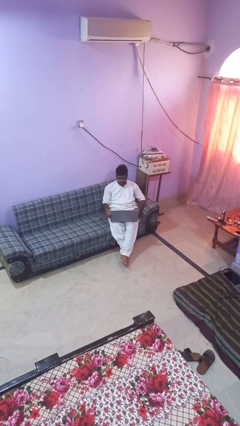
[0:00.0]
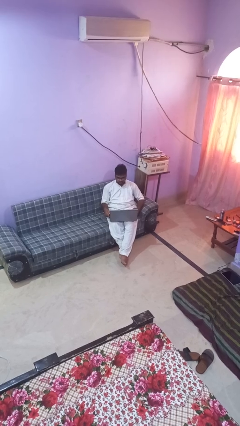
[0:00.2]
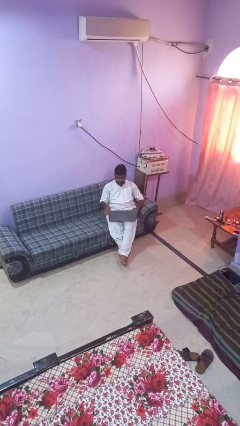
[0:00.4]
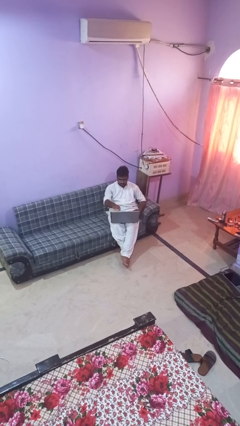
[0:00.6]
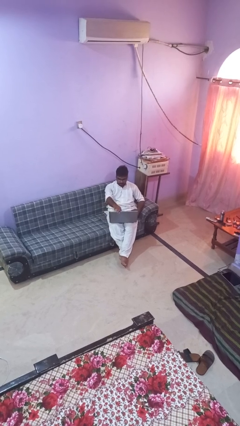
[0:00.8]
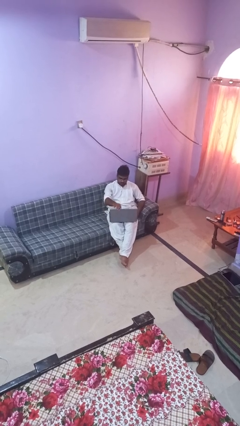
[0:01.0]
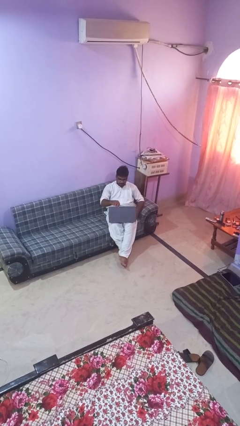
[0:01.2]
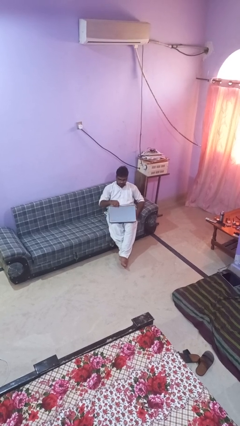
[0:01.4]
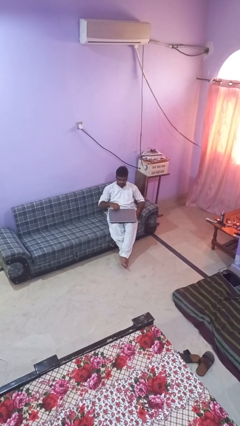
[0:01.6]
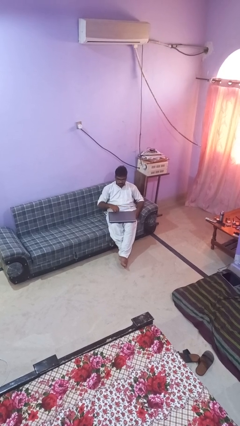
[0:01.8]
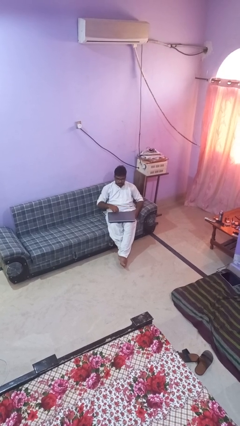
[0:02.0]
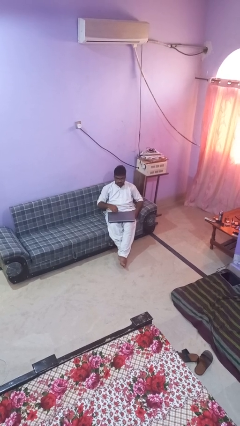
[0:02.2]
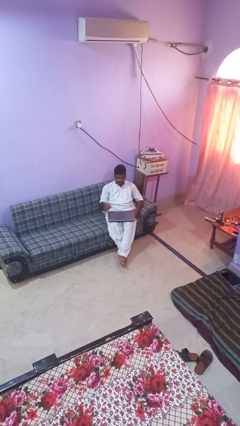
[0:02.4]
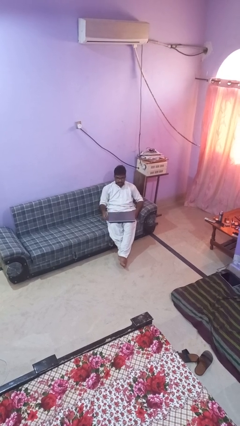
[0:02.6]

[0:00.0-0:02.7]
person closes laptop

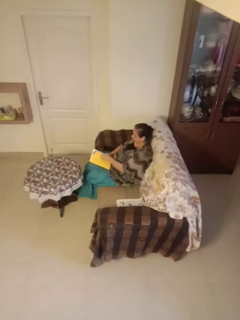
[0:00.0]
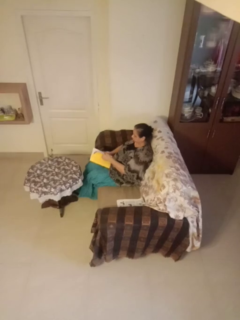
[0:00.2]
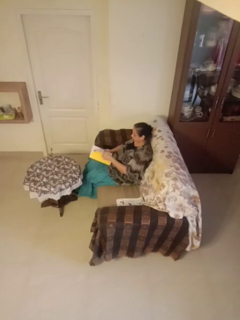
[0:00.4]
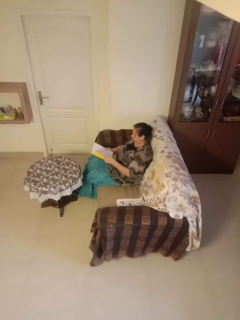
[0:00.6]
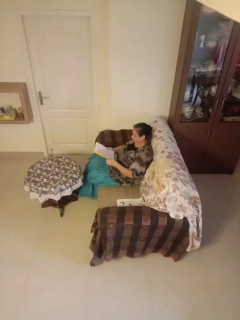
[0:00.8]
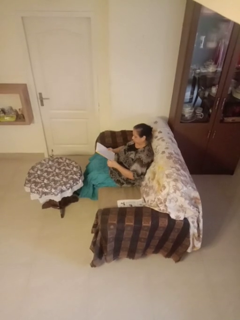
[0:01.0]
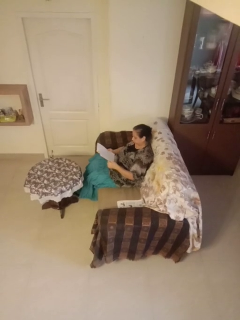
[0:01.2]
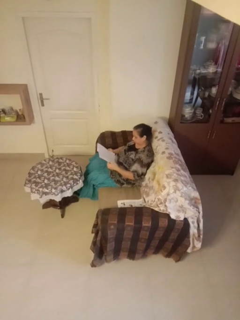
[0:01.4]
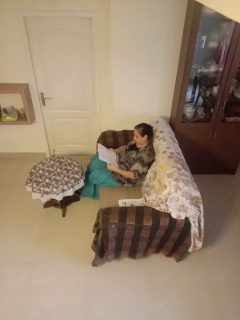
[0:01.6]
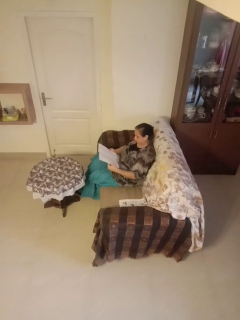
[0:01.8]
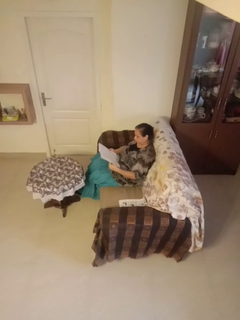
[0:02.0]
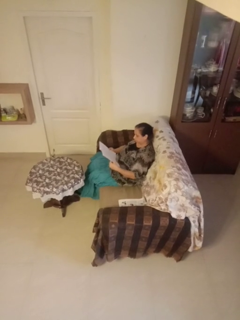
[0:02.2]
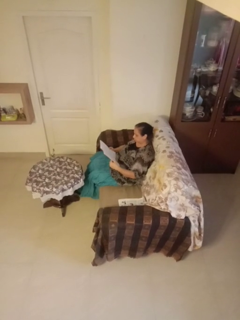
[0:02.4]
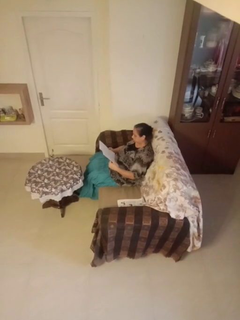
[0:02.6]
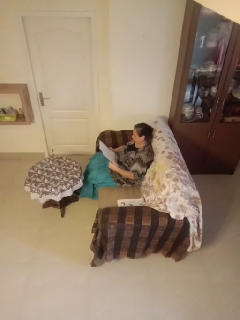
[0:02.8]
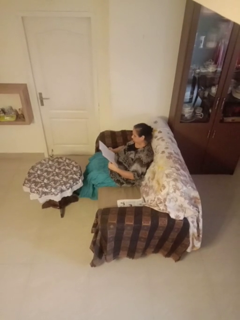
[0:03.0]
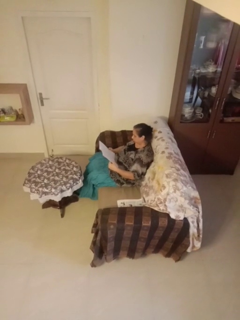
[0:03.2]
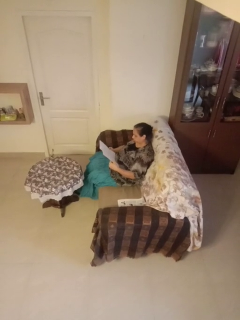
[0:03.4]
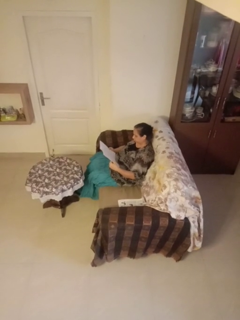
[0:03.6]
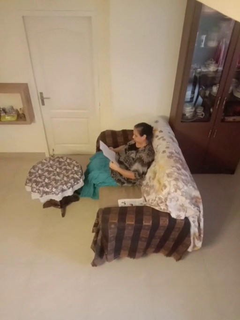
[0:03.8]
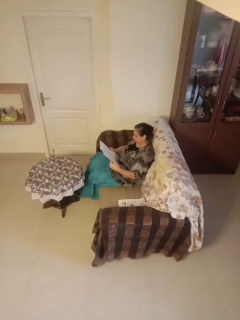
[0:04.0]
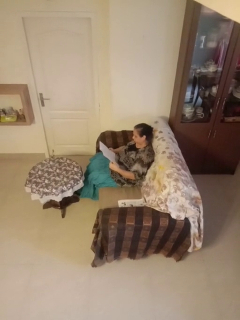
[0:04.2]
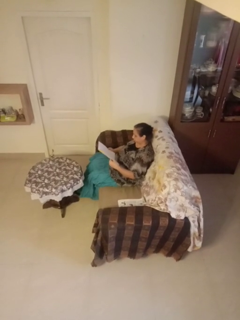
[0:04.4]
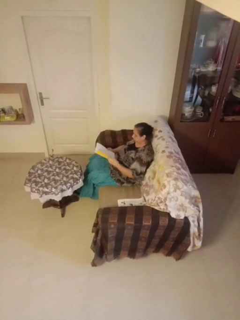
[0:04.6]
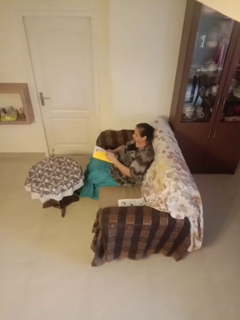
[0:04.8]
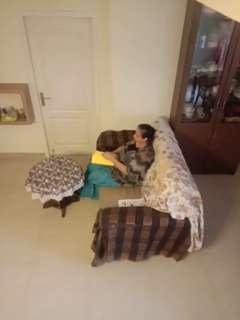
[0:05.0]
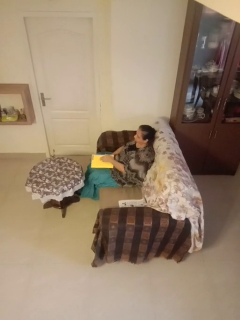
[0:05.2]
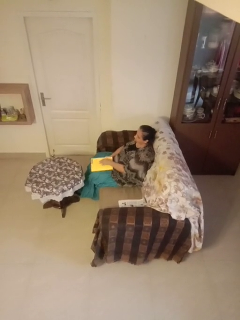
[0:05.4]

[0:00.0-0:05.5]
person reads magazine

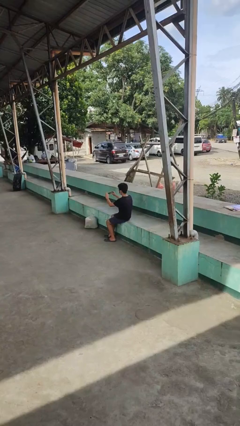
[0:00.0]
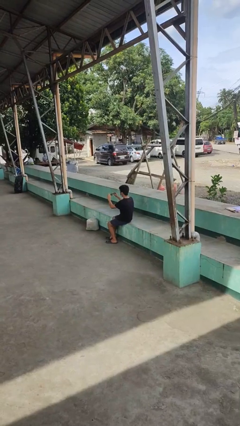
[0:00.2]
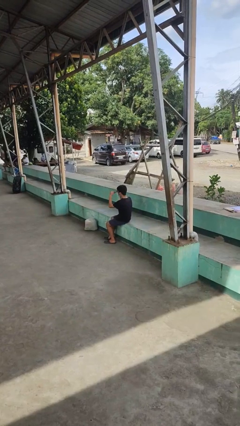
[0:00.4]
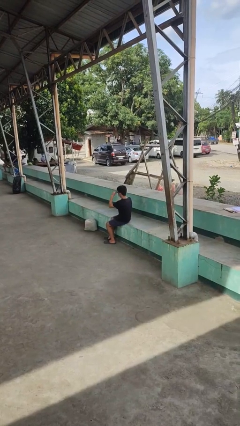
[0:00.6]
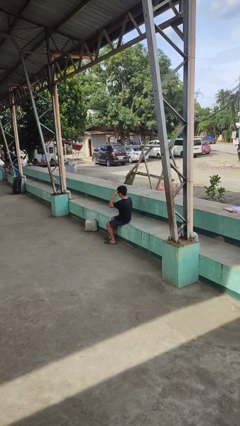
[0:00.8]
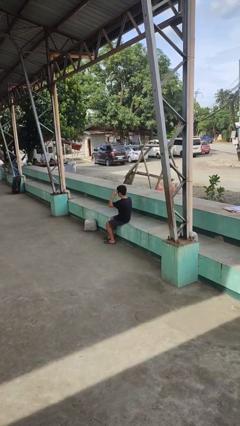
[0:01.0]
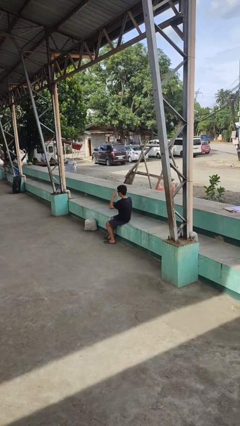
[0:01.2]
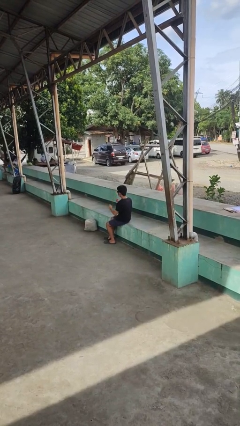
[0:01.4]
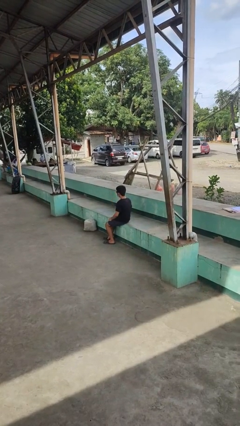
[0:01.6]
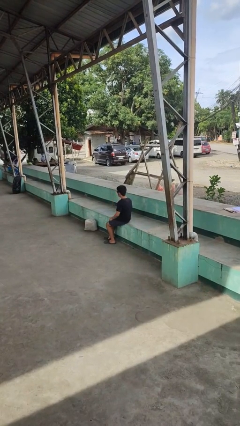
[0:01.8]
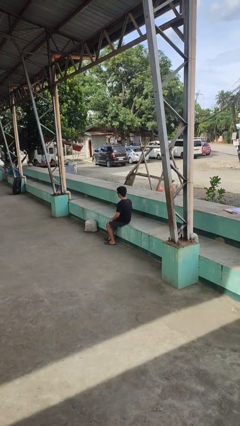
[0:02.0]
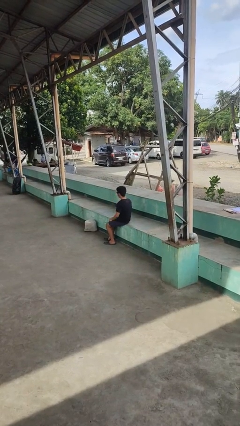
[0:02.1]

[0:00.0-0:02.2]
person puts on sunglasses

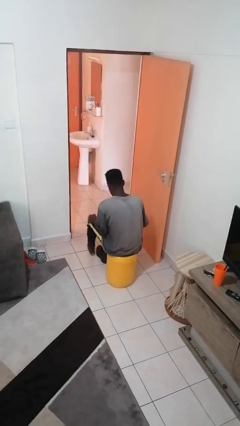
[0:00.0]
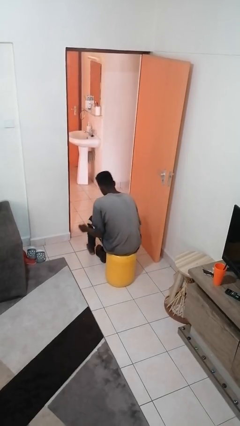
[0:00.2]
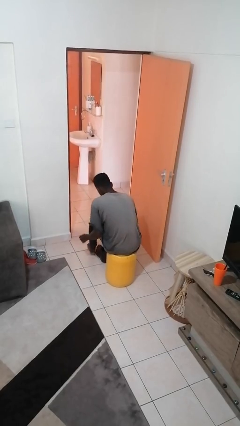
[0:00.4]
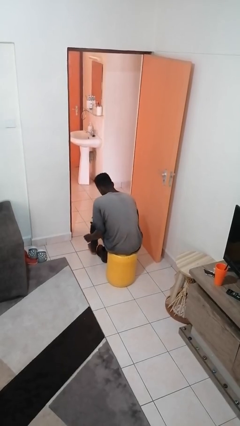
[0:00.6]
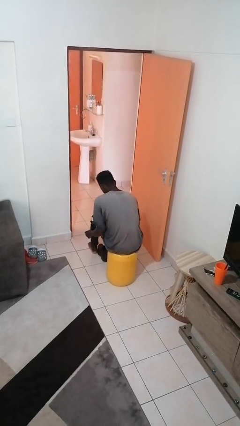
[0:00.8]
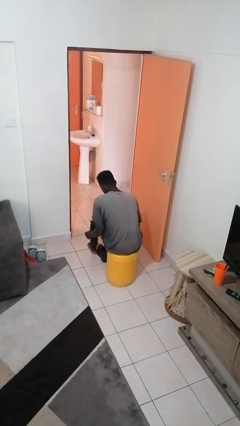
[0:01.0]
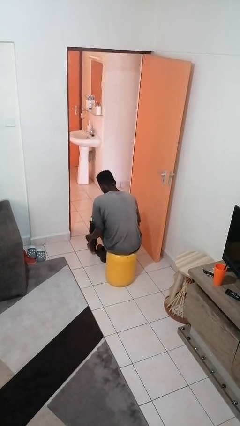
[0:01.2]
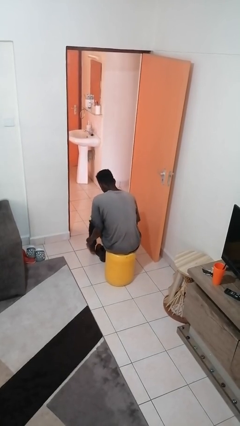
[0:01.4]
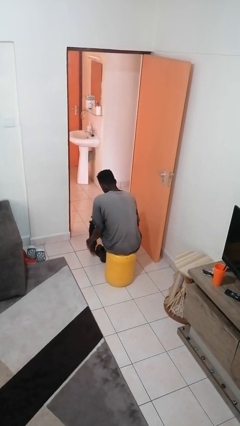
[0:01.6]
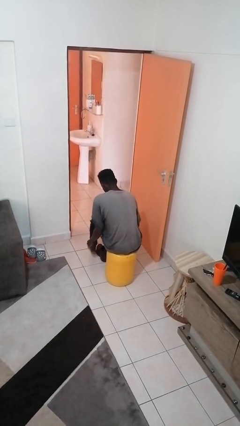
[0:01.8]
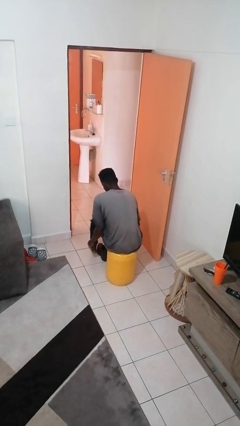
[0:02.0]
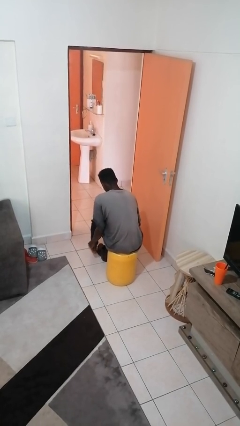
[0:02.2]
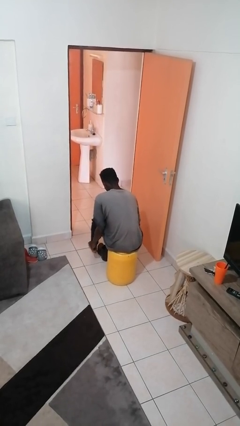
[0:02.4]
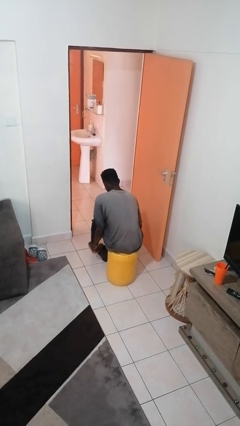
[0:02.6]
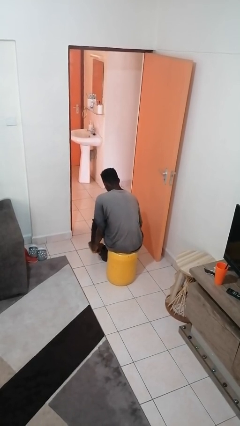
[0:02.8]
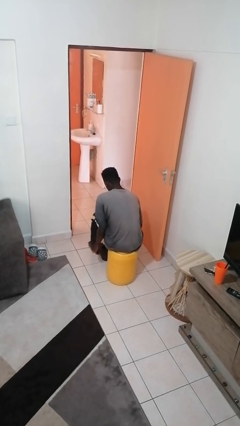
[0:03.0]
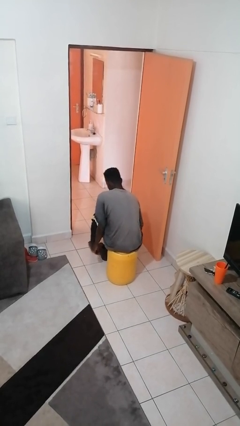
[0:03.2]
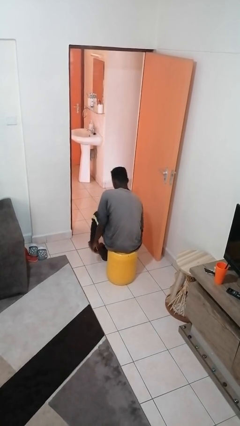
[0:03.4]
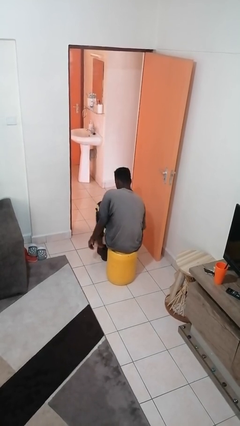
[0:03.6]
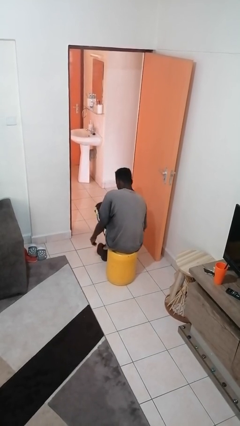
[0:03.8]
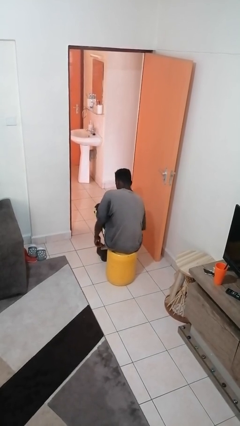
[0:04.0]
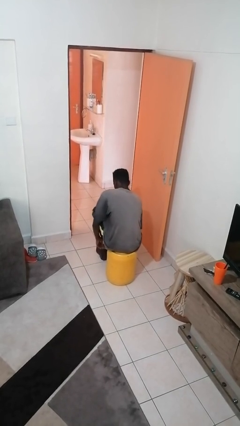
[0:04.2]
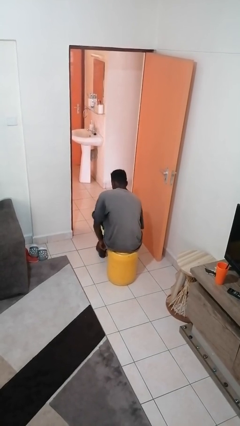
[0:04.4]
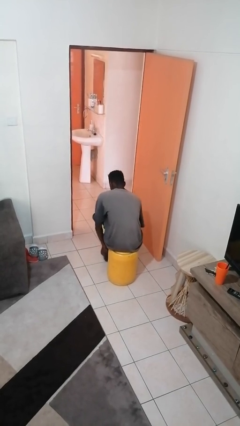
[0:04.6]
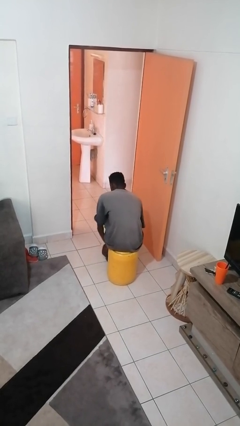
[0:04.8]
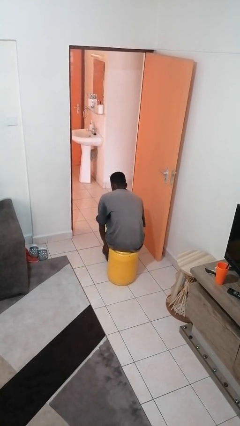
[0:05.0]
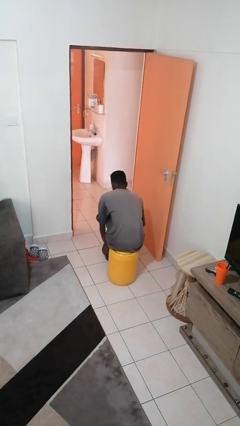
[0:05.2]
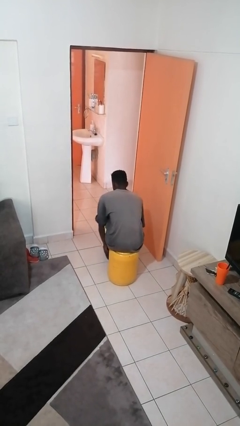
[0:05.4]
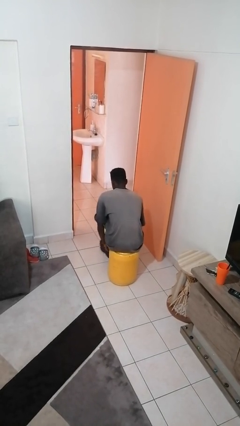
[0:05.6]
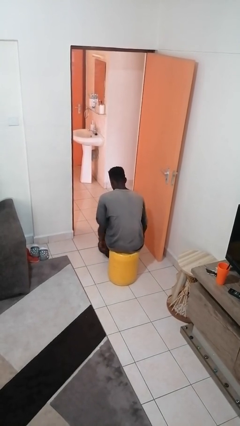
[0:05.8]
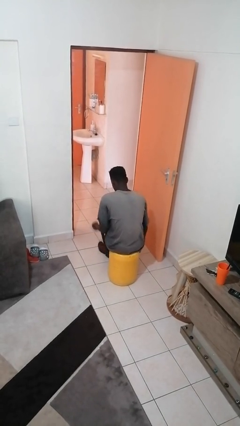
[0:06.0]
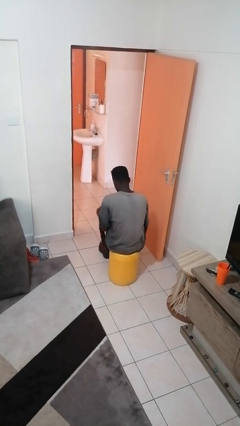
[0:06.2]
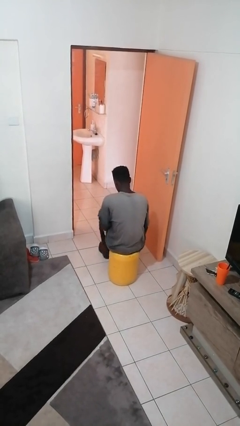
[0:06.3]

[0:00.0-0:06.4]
person puts on shoes

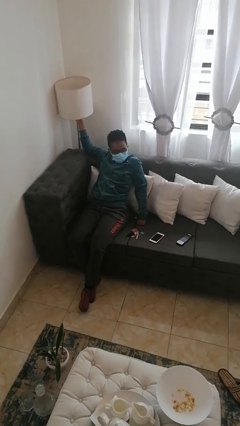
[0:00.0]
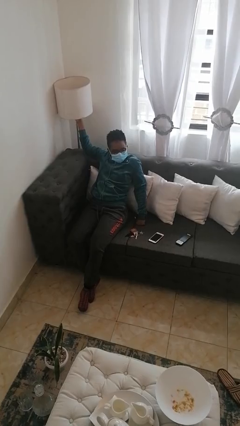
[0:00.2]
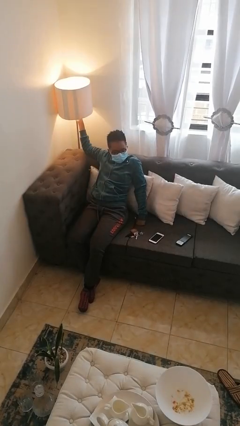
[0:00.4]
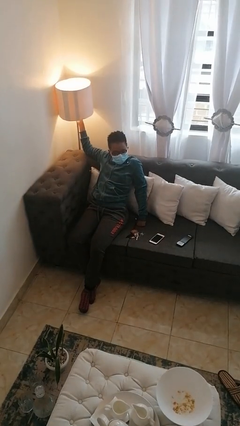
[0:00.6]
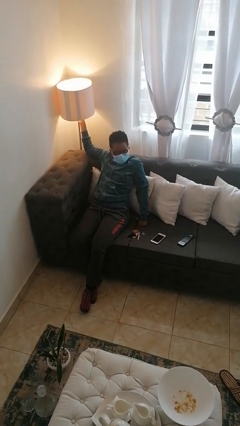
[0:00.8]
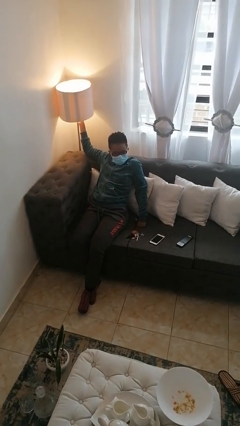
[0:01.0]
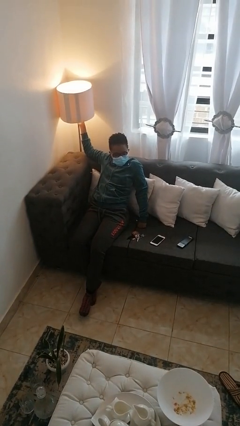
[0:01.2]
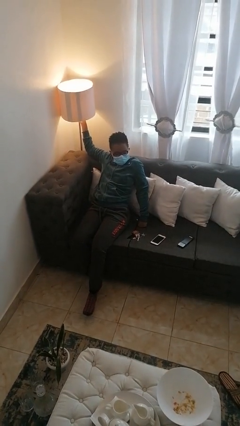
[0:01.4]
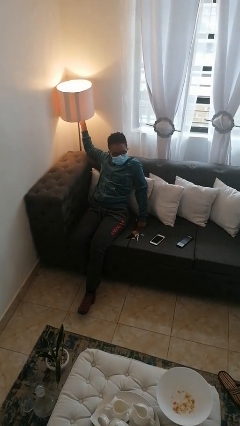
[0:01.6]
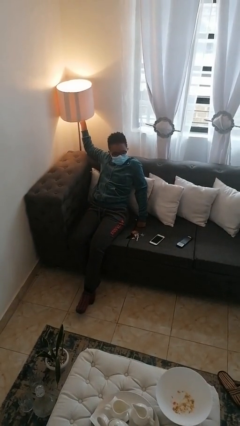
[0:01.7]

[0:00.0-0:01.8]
person turns on lamp

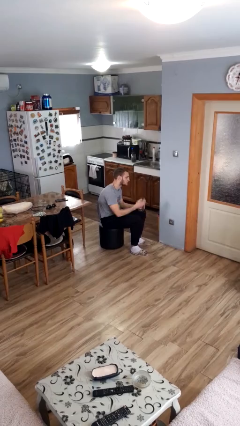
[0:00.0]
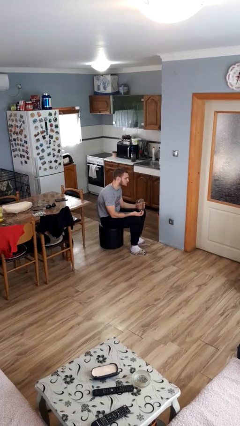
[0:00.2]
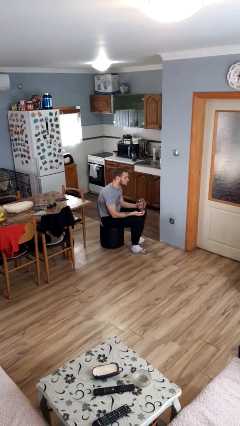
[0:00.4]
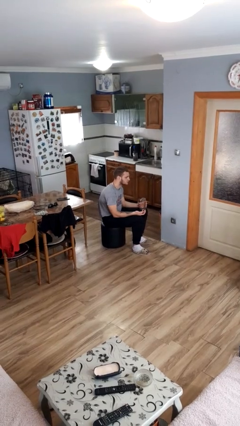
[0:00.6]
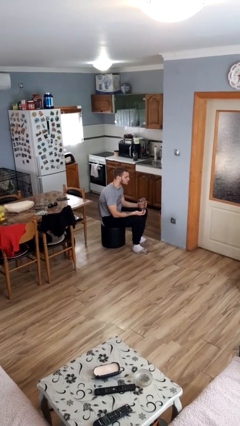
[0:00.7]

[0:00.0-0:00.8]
person opens jar
